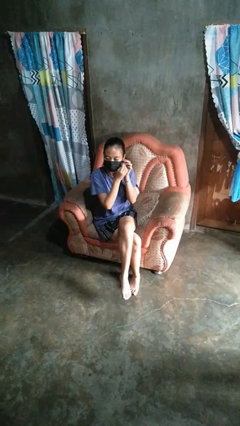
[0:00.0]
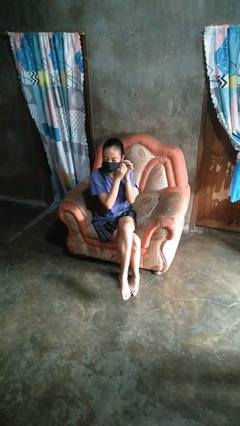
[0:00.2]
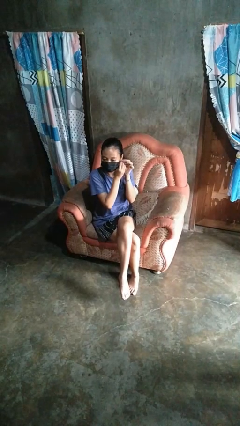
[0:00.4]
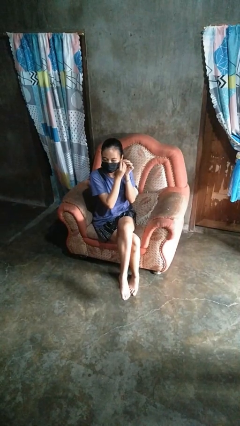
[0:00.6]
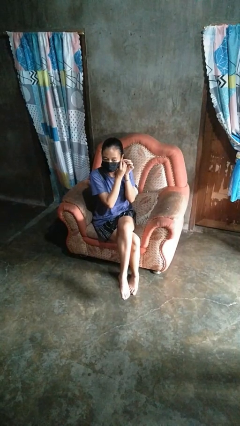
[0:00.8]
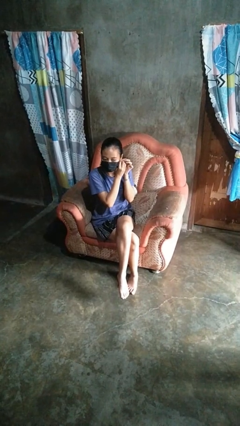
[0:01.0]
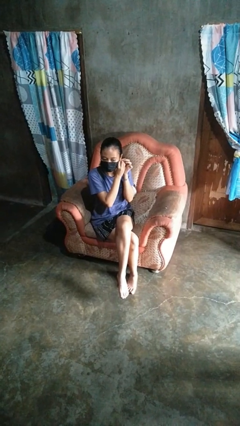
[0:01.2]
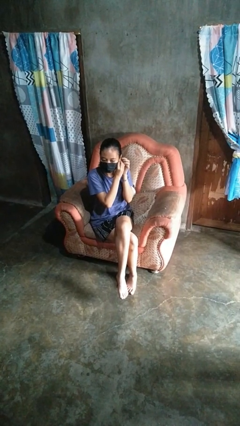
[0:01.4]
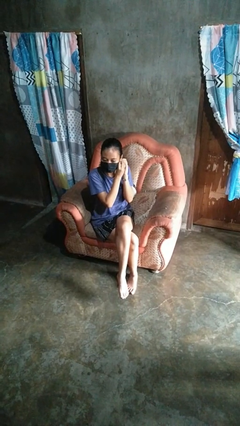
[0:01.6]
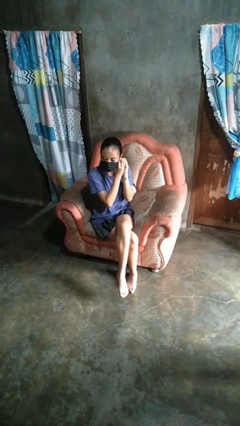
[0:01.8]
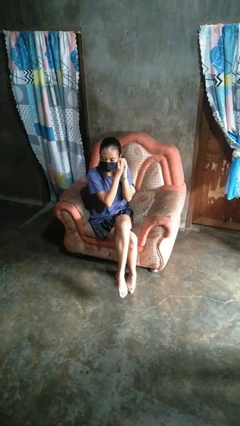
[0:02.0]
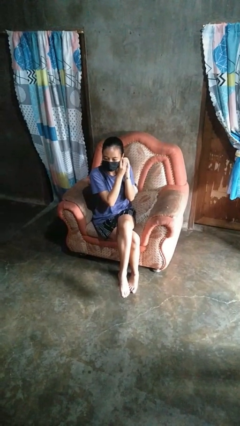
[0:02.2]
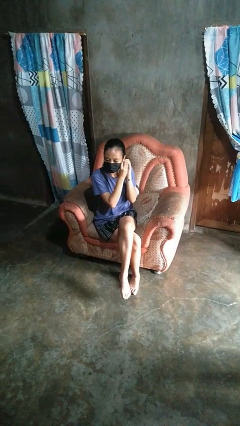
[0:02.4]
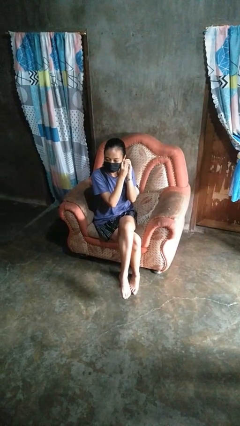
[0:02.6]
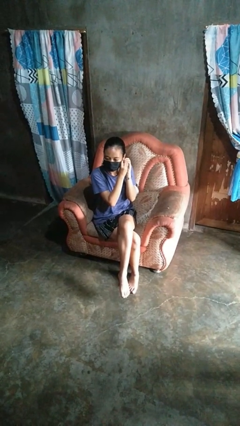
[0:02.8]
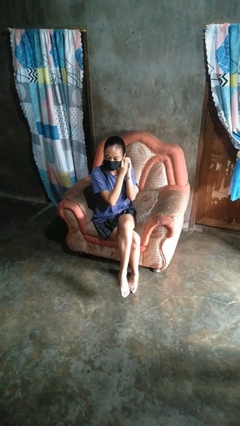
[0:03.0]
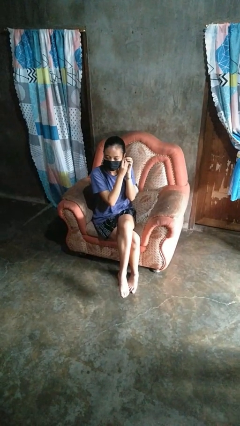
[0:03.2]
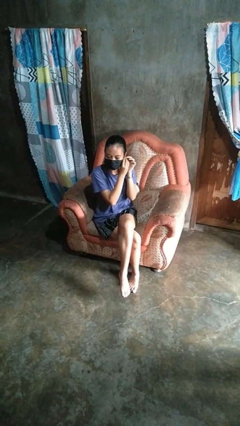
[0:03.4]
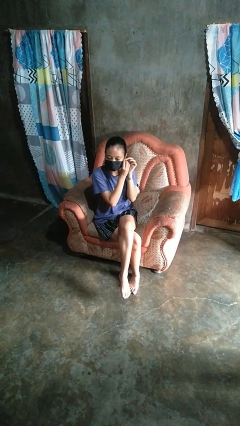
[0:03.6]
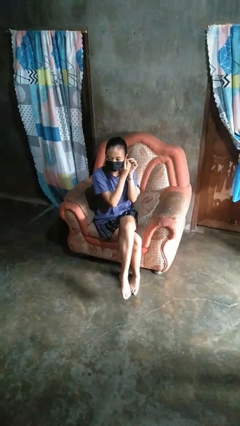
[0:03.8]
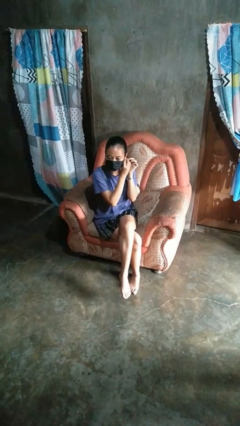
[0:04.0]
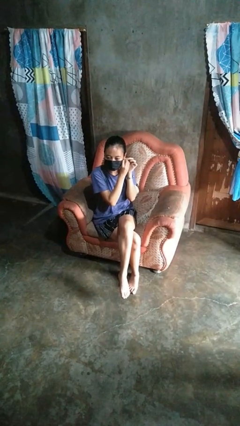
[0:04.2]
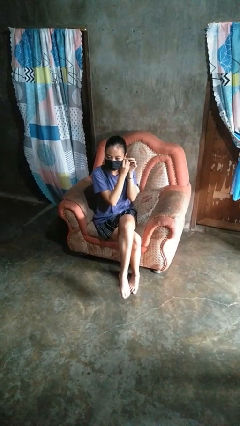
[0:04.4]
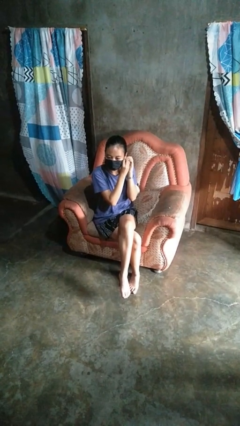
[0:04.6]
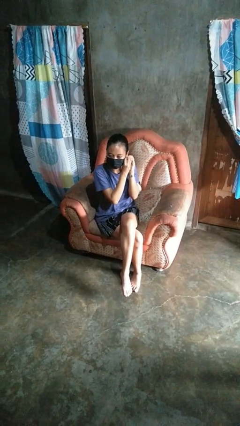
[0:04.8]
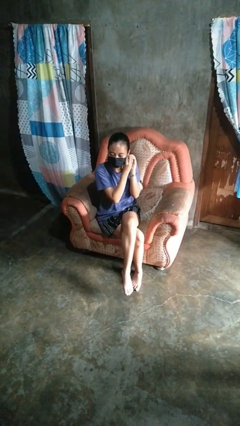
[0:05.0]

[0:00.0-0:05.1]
person puts on earrings

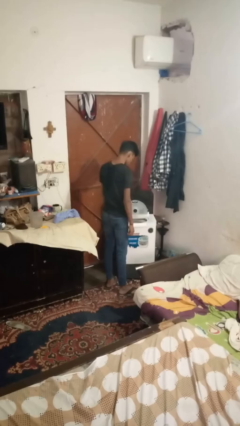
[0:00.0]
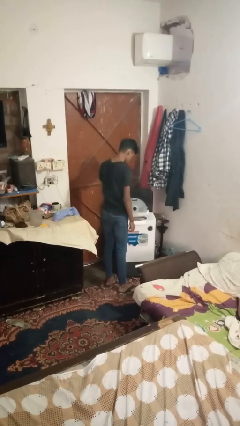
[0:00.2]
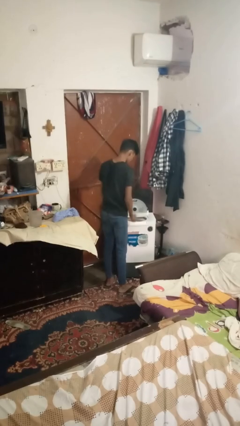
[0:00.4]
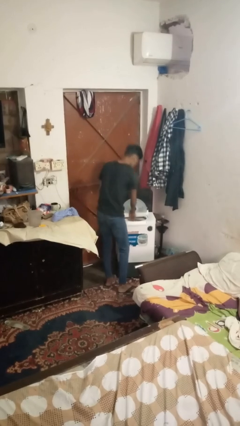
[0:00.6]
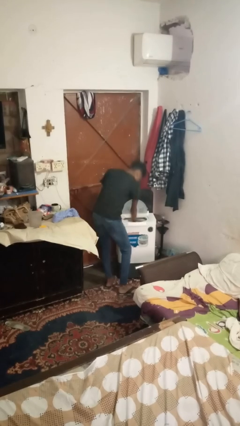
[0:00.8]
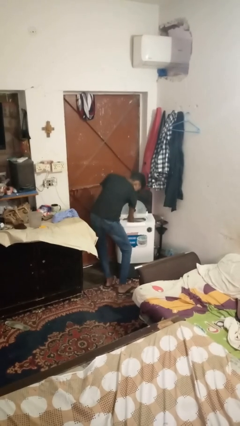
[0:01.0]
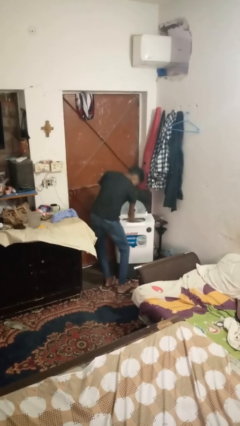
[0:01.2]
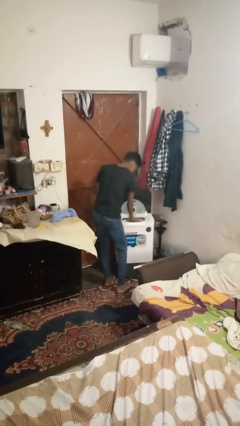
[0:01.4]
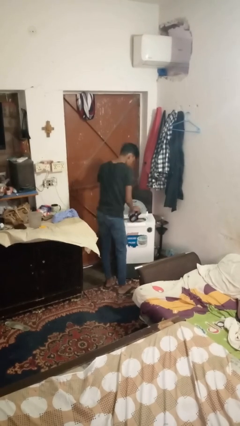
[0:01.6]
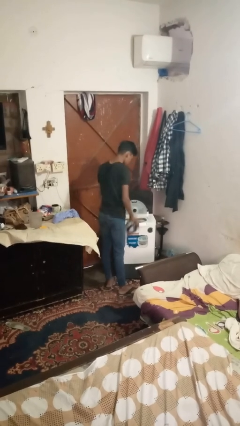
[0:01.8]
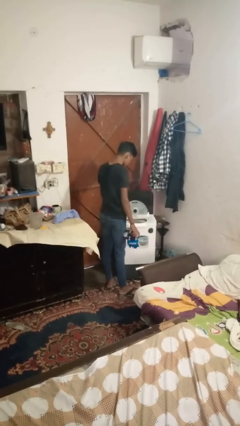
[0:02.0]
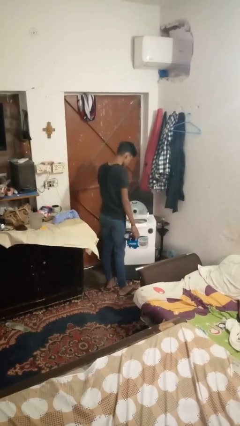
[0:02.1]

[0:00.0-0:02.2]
person unloads clotheswasher

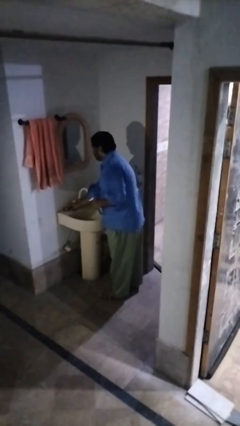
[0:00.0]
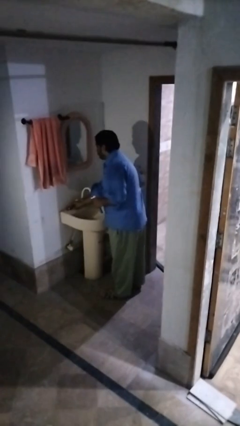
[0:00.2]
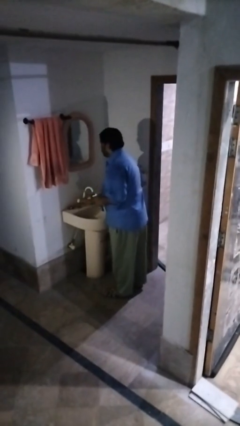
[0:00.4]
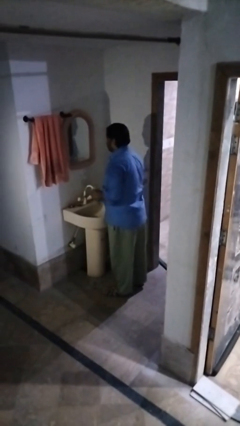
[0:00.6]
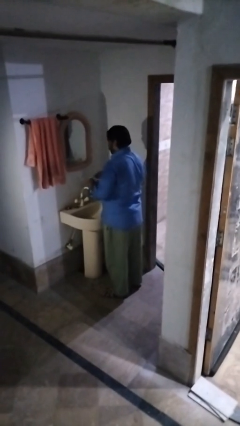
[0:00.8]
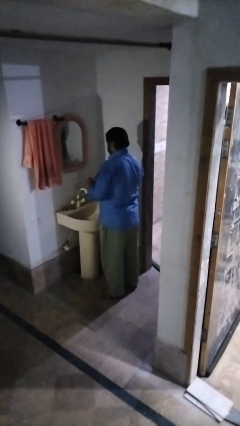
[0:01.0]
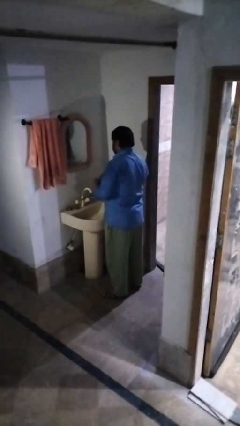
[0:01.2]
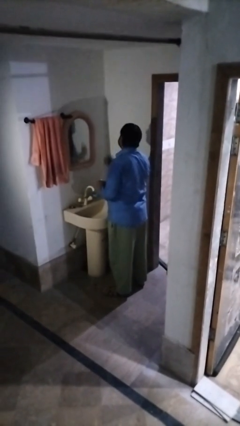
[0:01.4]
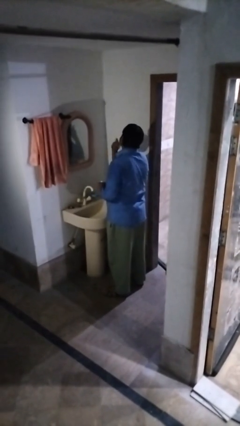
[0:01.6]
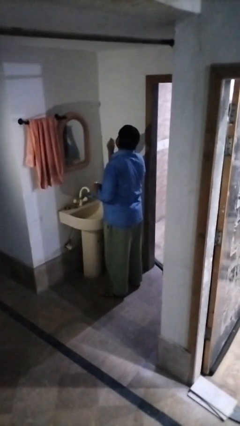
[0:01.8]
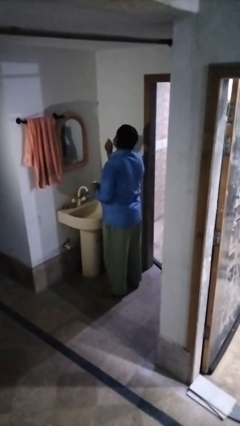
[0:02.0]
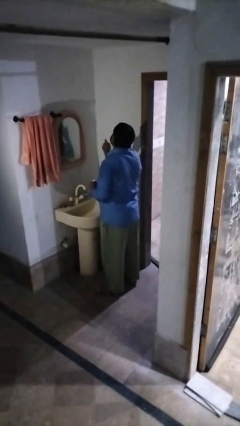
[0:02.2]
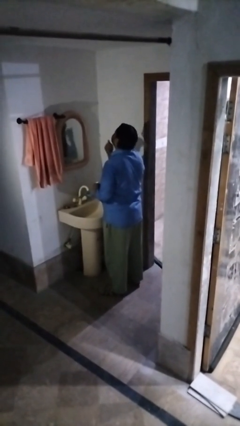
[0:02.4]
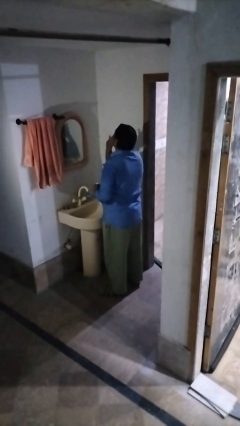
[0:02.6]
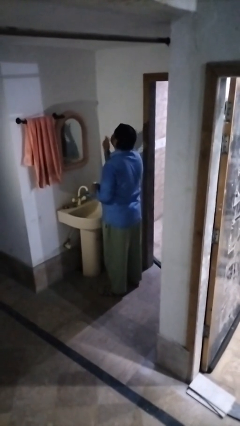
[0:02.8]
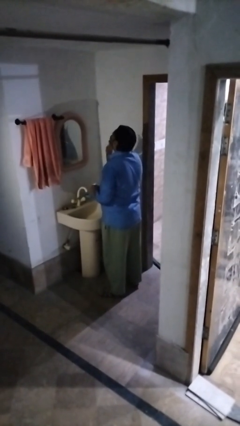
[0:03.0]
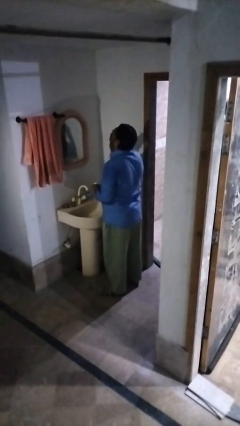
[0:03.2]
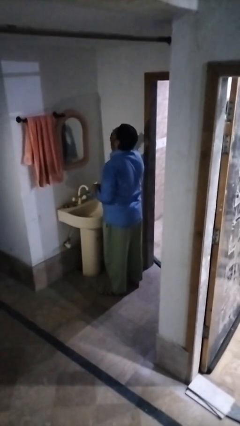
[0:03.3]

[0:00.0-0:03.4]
person applies shaving cream

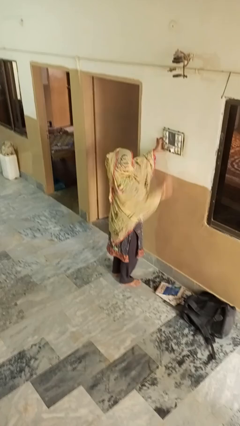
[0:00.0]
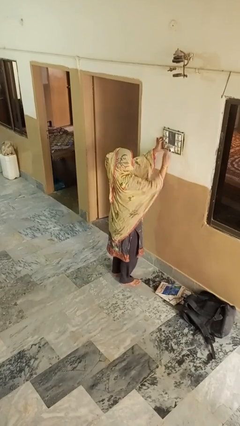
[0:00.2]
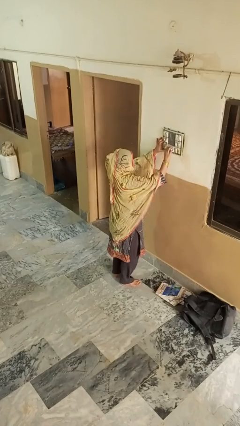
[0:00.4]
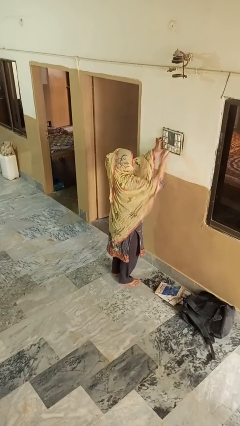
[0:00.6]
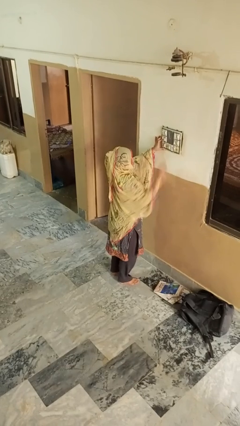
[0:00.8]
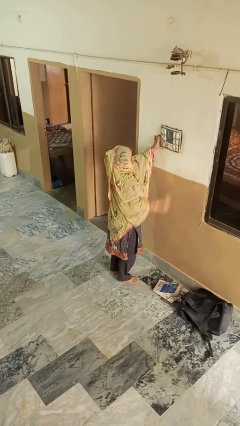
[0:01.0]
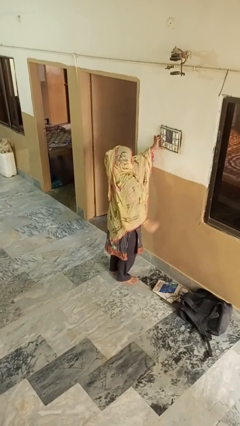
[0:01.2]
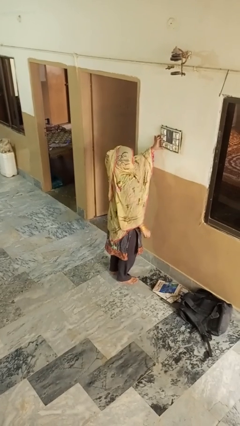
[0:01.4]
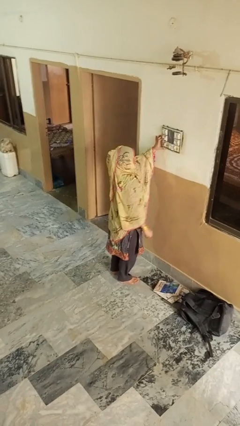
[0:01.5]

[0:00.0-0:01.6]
person unplugs from electrical socket

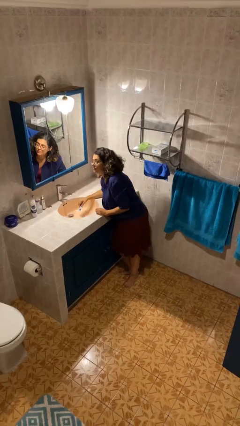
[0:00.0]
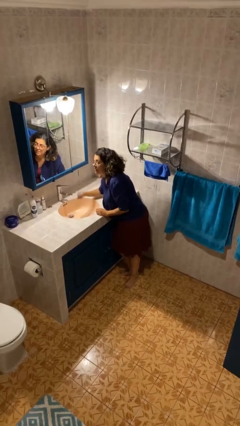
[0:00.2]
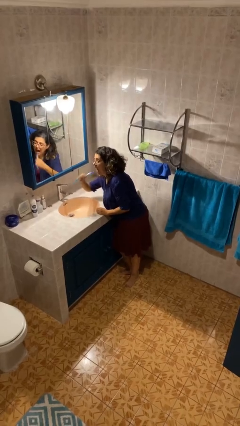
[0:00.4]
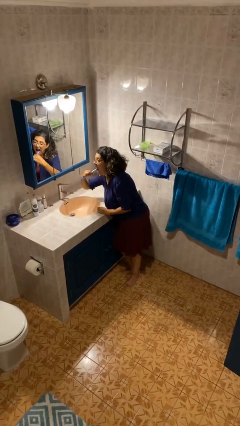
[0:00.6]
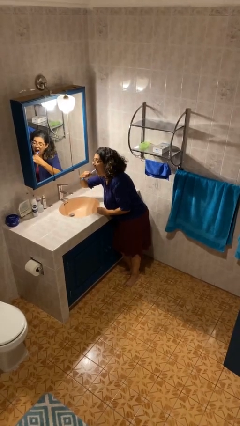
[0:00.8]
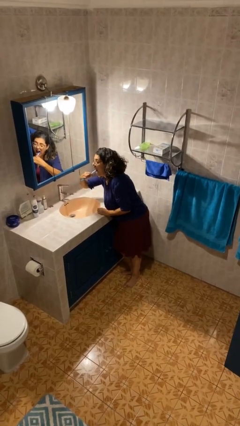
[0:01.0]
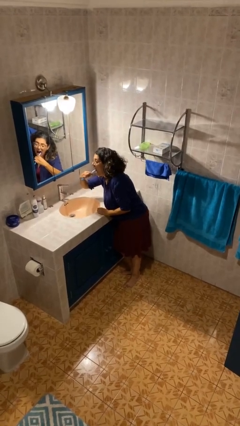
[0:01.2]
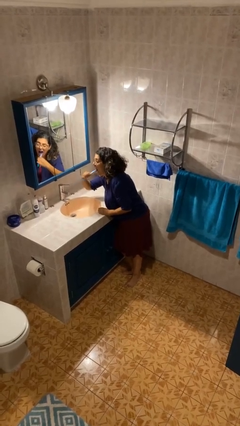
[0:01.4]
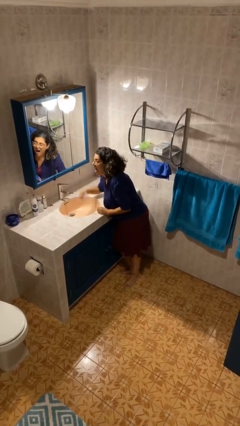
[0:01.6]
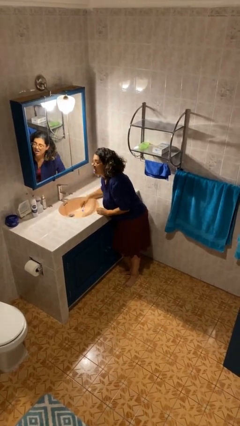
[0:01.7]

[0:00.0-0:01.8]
person brushes teeth

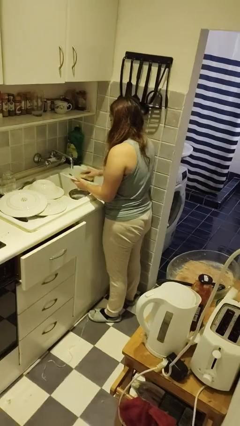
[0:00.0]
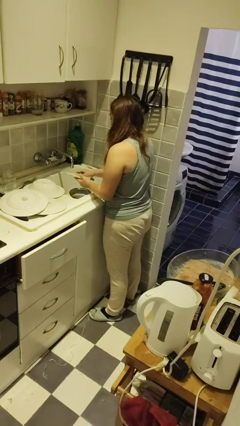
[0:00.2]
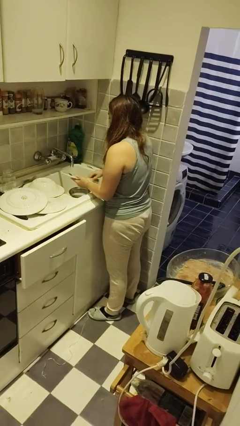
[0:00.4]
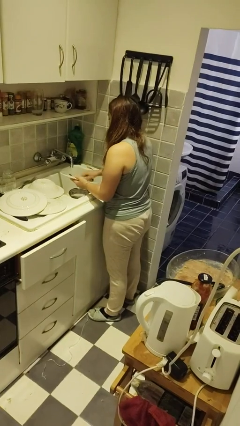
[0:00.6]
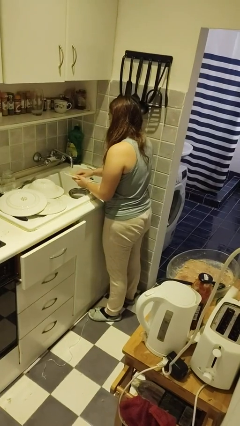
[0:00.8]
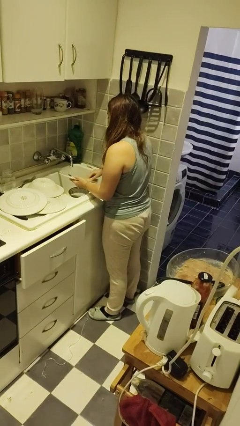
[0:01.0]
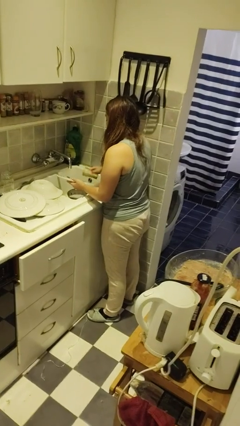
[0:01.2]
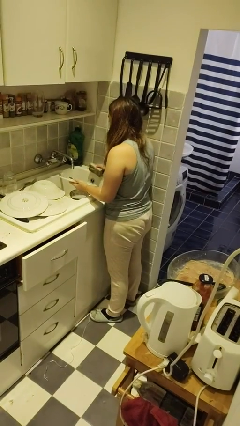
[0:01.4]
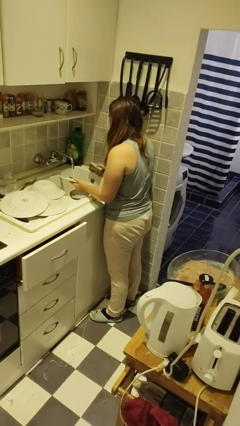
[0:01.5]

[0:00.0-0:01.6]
person washes dish

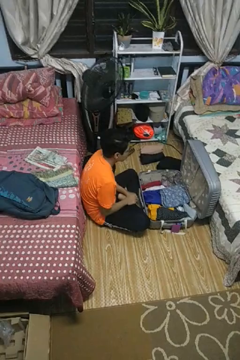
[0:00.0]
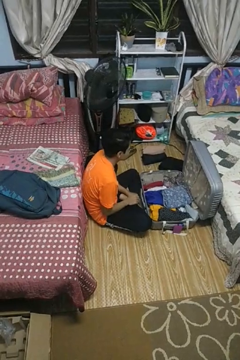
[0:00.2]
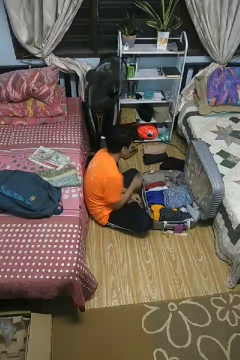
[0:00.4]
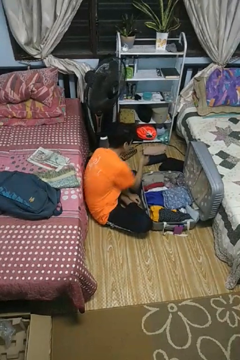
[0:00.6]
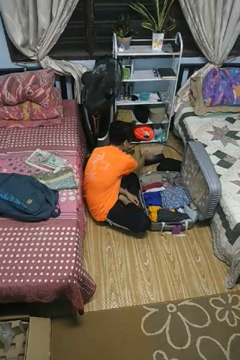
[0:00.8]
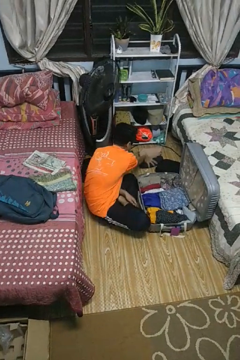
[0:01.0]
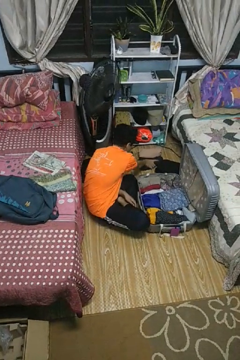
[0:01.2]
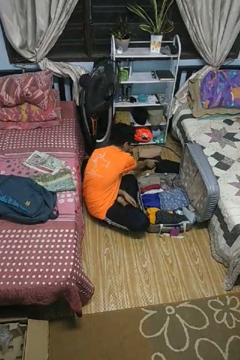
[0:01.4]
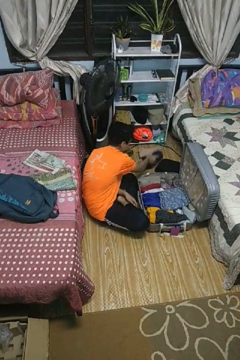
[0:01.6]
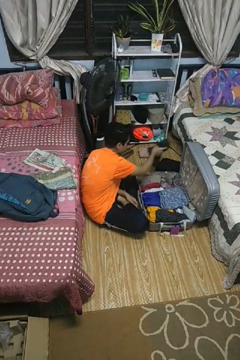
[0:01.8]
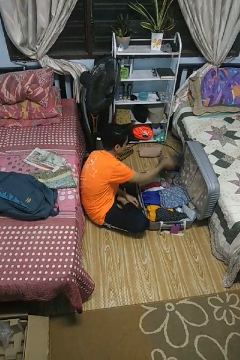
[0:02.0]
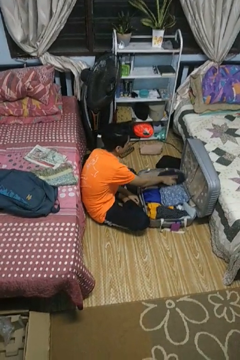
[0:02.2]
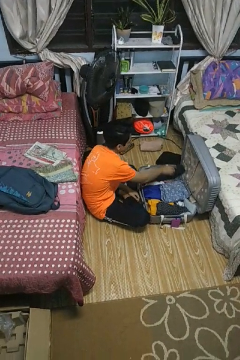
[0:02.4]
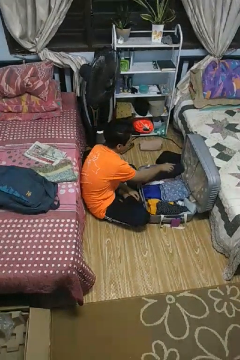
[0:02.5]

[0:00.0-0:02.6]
person loads clothes into suitcase
